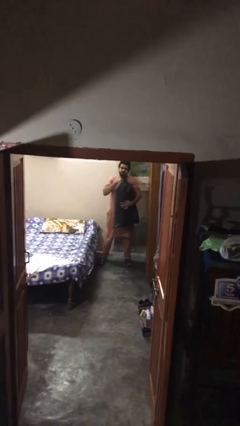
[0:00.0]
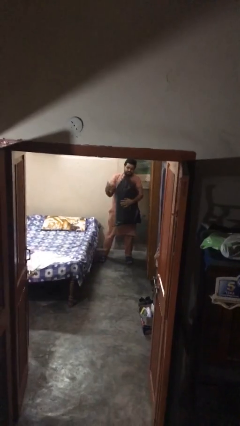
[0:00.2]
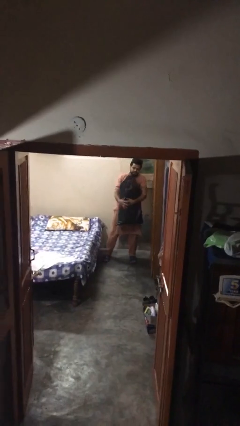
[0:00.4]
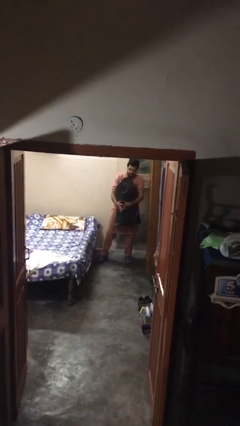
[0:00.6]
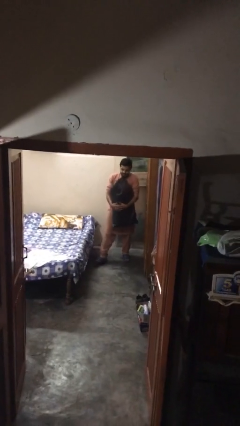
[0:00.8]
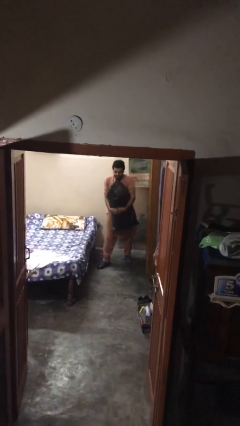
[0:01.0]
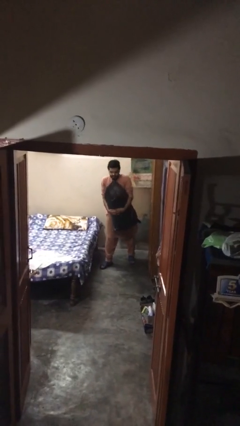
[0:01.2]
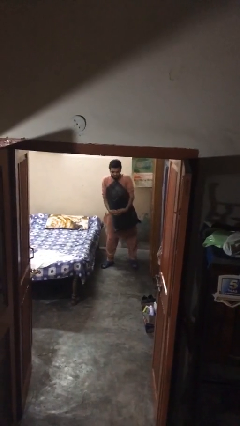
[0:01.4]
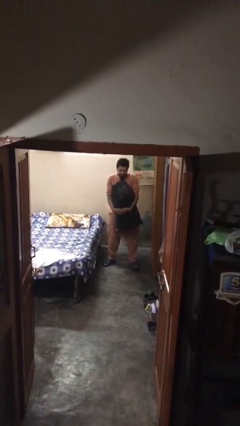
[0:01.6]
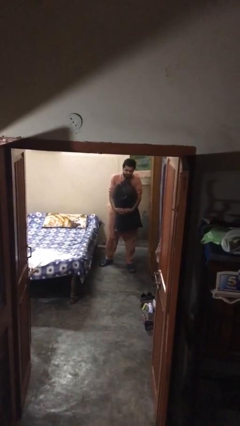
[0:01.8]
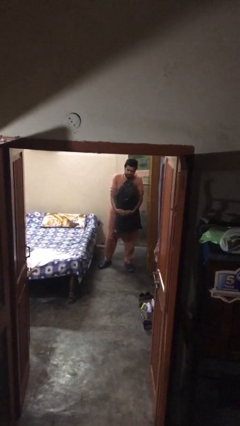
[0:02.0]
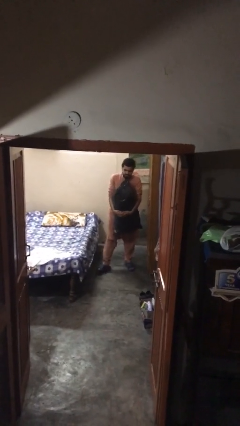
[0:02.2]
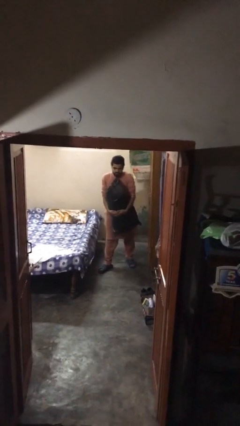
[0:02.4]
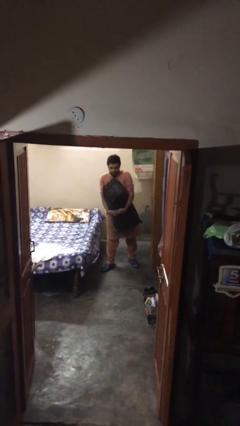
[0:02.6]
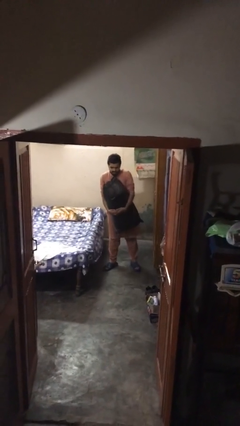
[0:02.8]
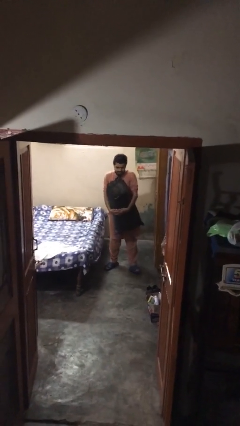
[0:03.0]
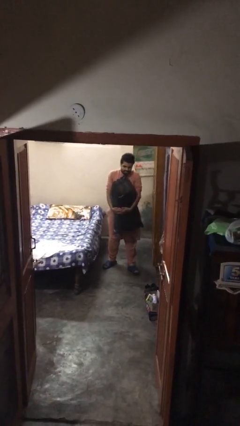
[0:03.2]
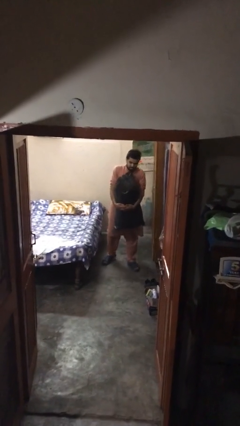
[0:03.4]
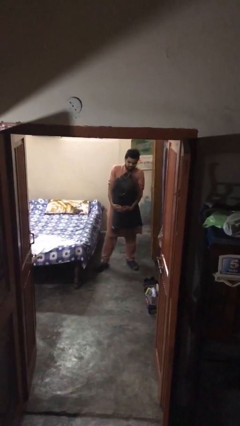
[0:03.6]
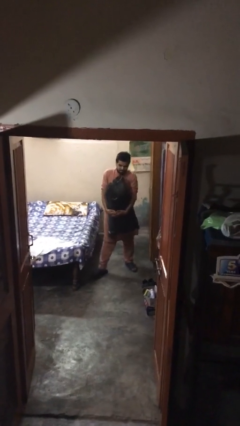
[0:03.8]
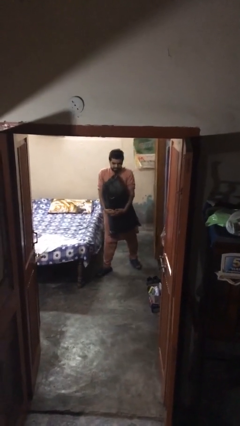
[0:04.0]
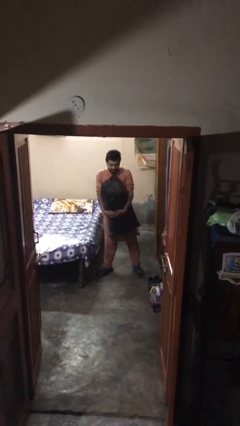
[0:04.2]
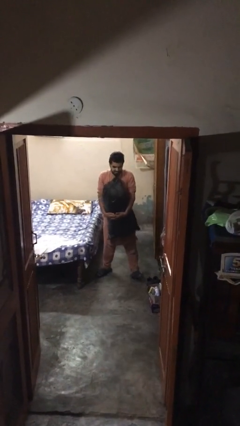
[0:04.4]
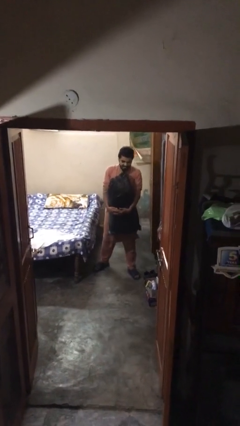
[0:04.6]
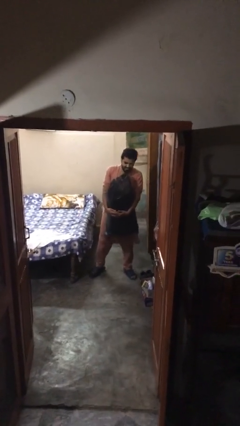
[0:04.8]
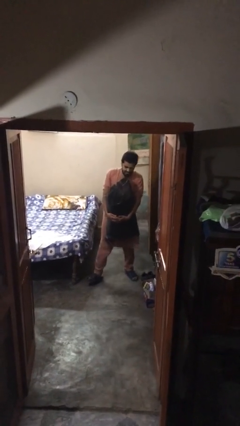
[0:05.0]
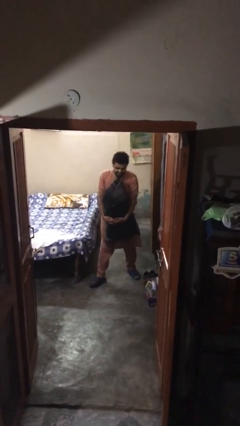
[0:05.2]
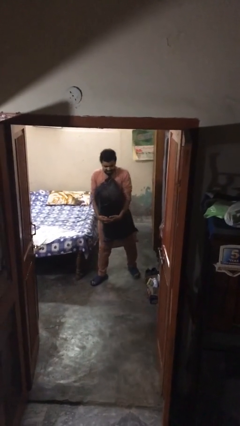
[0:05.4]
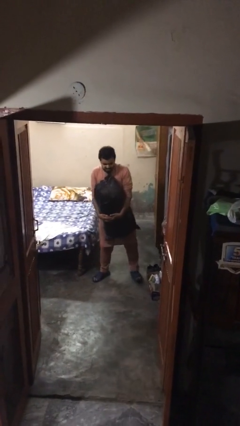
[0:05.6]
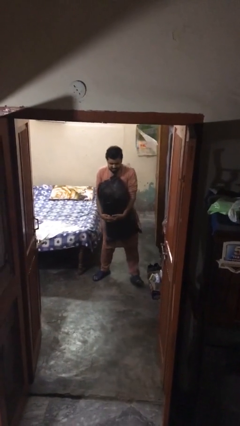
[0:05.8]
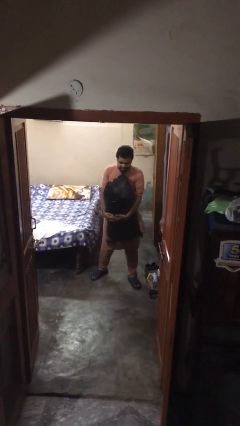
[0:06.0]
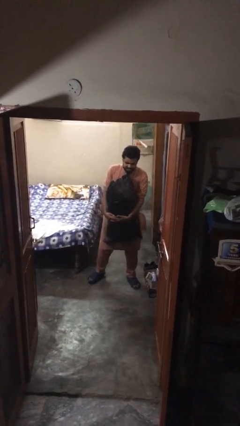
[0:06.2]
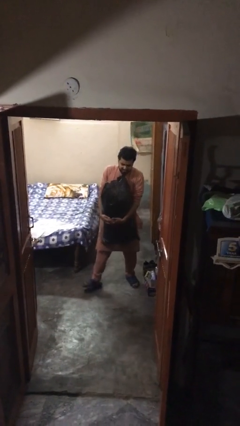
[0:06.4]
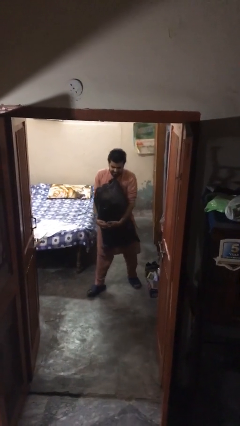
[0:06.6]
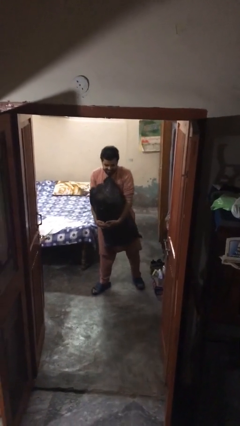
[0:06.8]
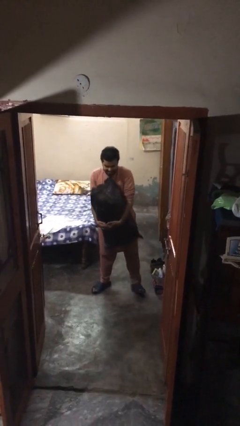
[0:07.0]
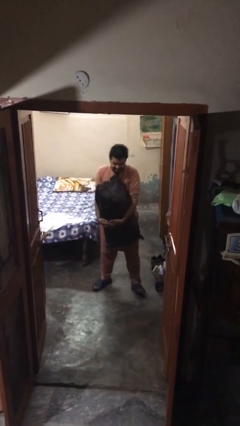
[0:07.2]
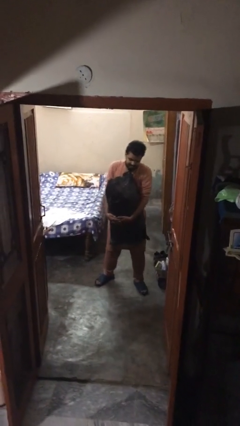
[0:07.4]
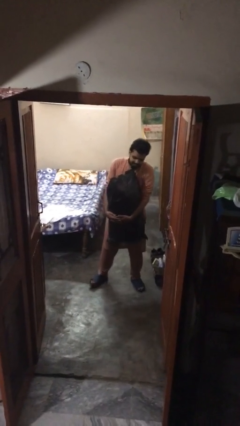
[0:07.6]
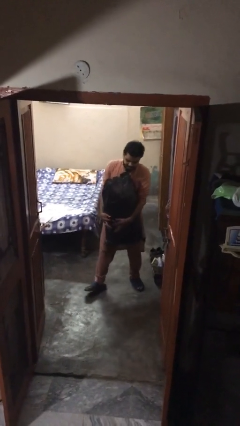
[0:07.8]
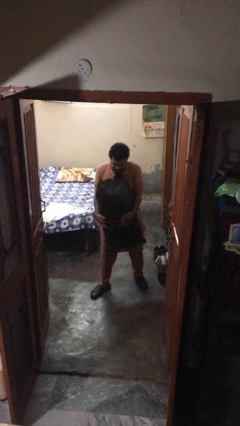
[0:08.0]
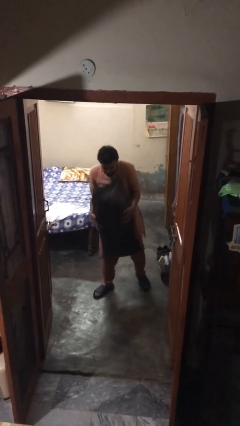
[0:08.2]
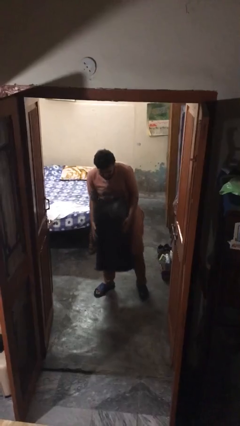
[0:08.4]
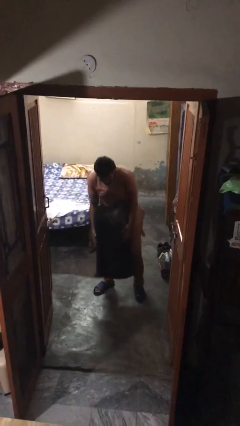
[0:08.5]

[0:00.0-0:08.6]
person carries heavy object

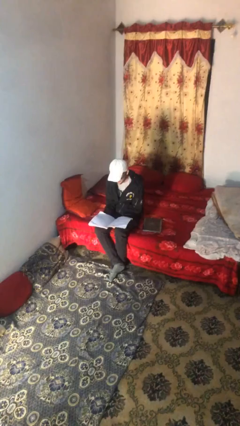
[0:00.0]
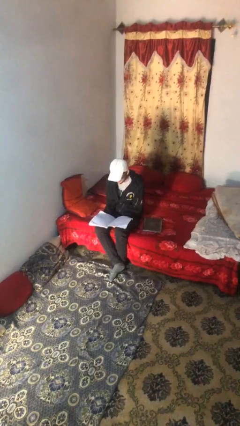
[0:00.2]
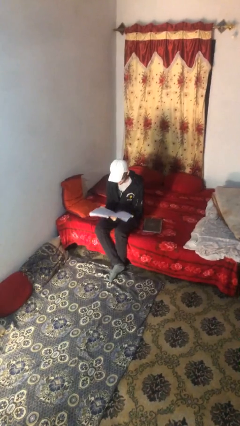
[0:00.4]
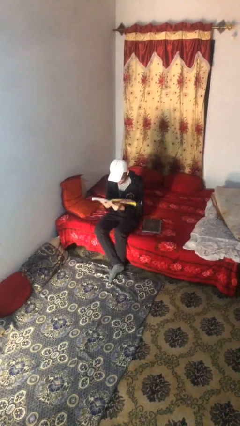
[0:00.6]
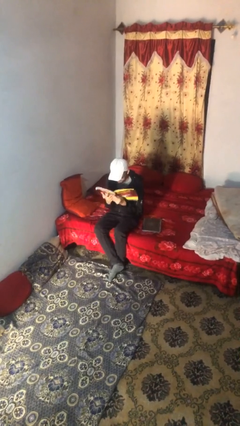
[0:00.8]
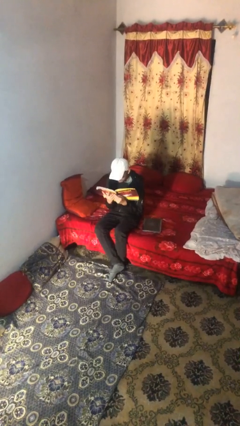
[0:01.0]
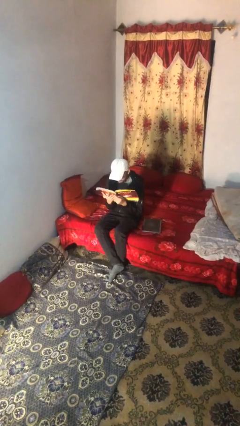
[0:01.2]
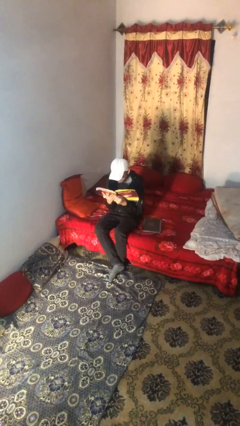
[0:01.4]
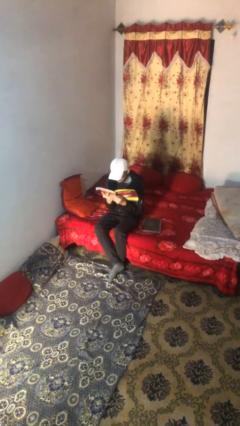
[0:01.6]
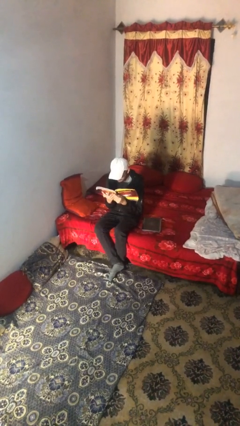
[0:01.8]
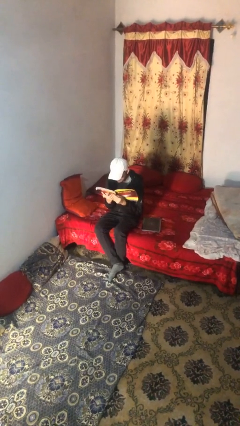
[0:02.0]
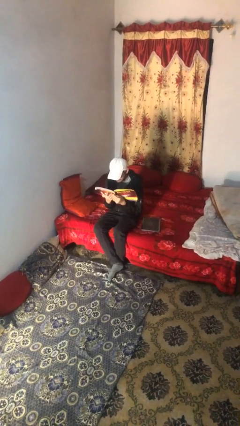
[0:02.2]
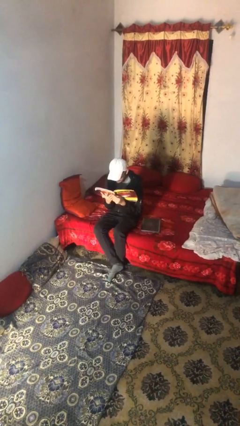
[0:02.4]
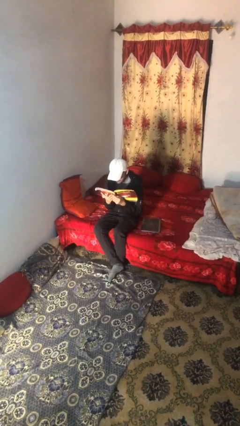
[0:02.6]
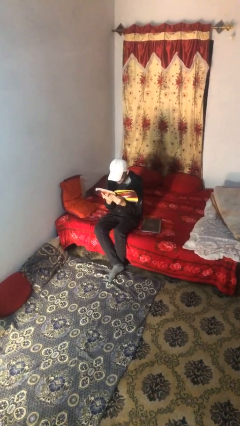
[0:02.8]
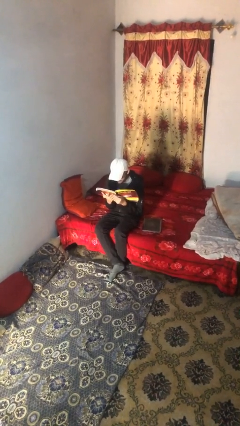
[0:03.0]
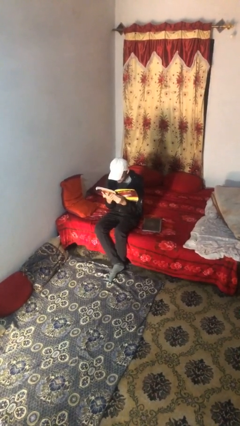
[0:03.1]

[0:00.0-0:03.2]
person reads document

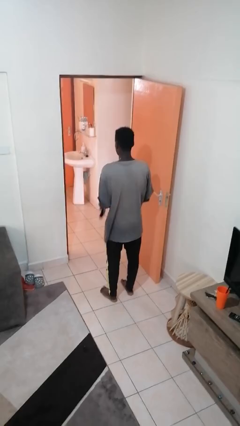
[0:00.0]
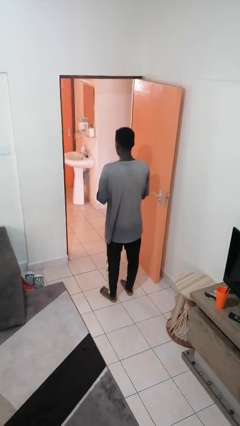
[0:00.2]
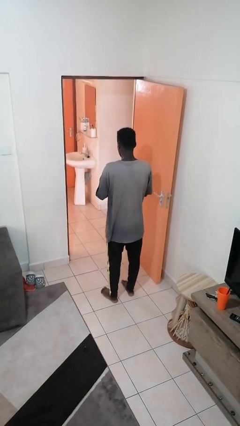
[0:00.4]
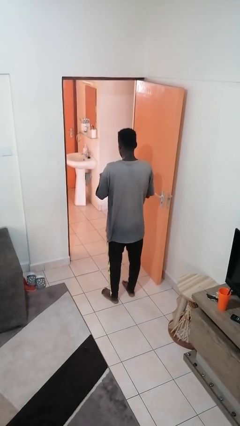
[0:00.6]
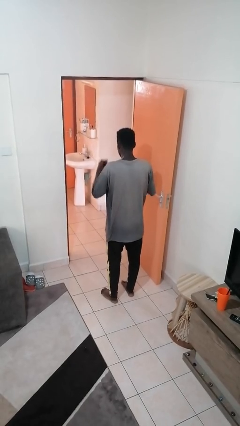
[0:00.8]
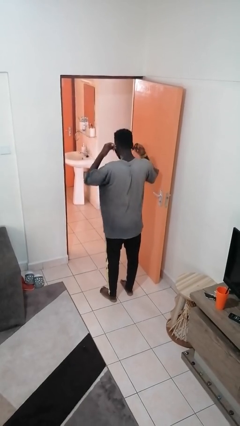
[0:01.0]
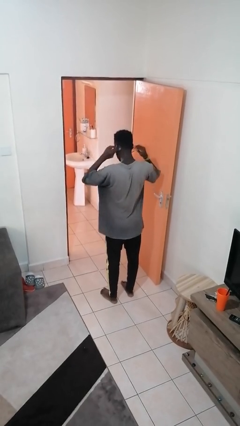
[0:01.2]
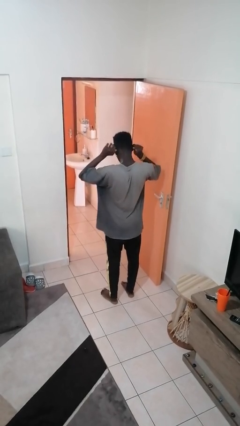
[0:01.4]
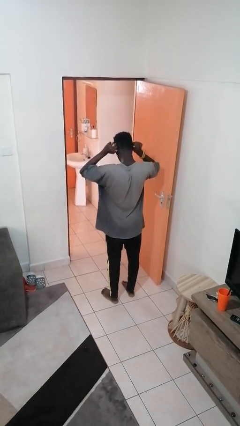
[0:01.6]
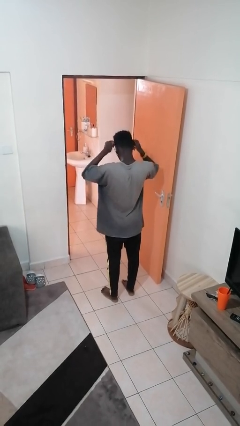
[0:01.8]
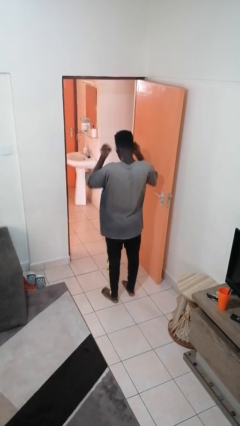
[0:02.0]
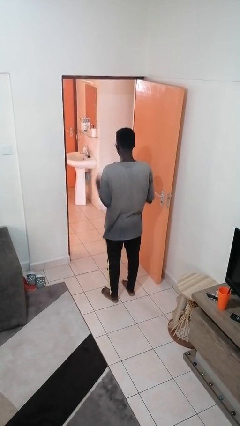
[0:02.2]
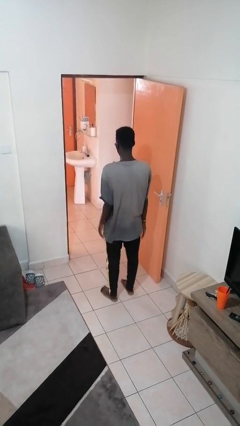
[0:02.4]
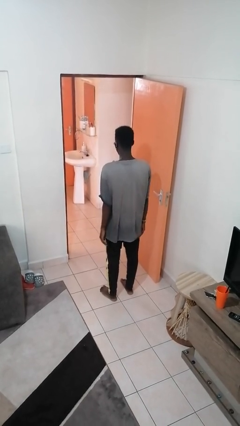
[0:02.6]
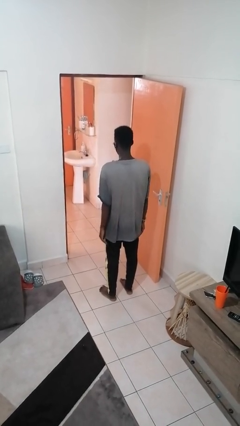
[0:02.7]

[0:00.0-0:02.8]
person puts on facemask

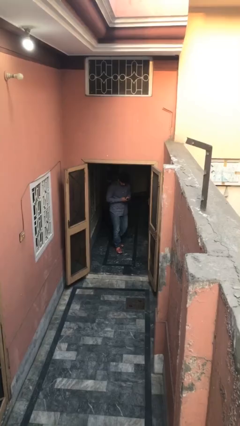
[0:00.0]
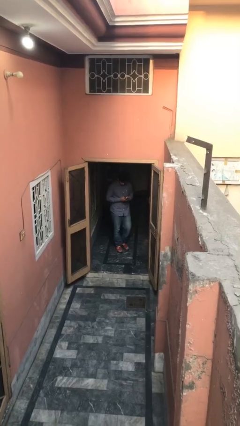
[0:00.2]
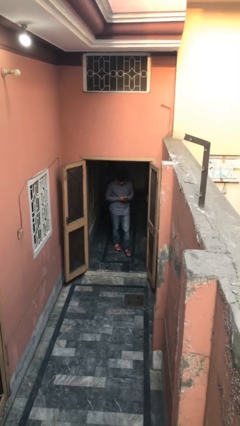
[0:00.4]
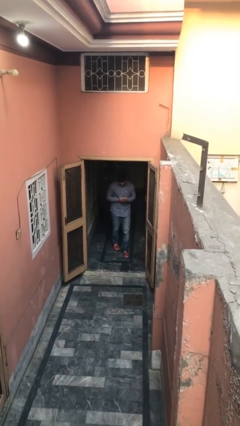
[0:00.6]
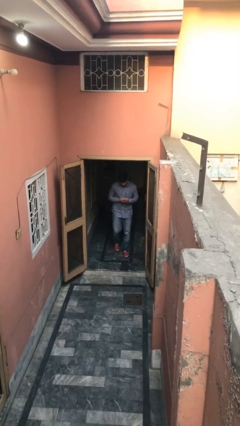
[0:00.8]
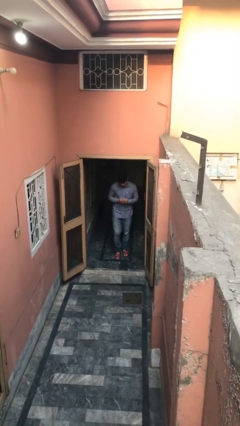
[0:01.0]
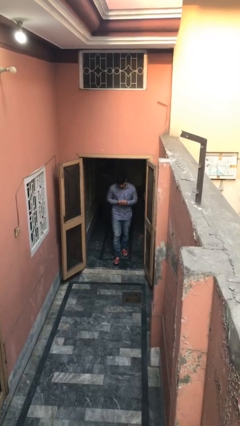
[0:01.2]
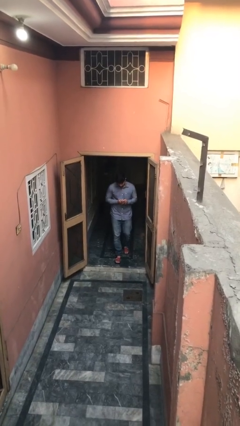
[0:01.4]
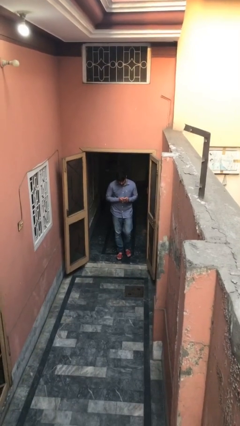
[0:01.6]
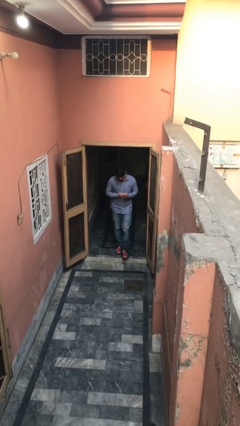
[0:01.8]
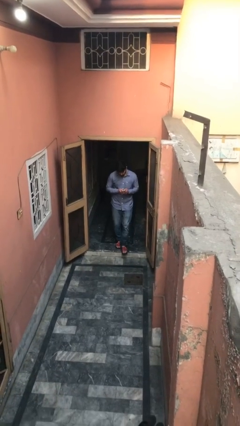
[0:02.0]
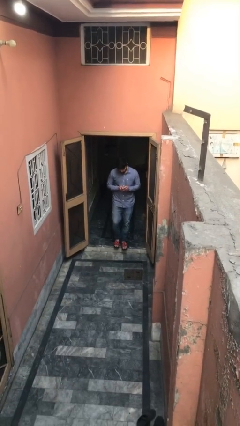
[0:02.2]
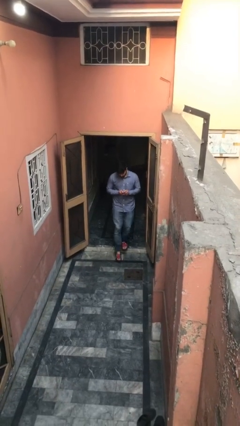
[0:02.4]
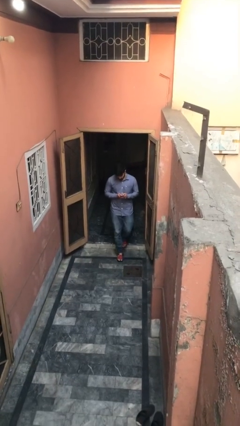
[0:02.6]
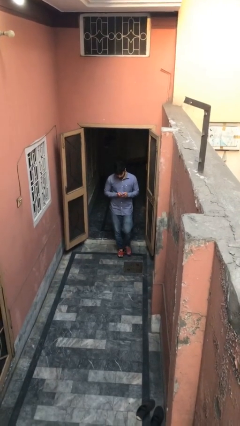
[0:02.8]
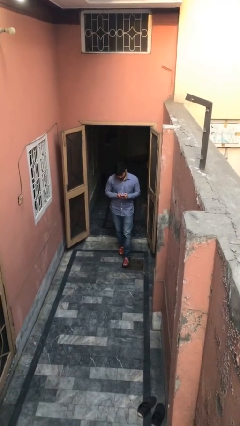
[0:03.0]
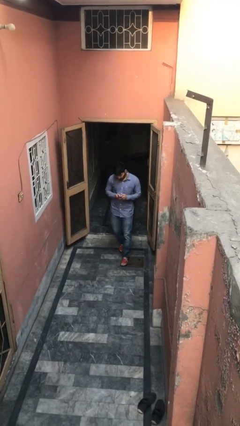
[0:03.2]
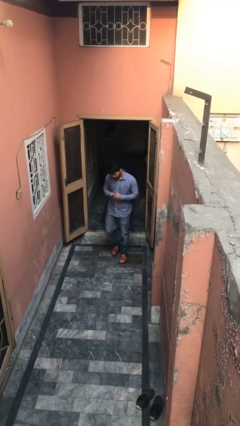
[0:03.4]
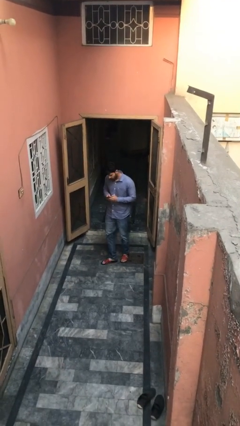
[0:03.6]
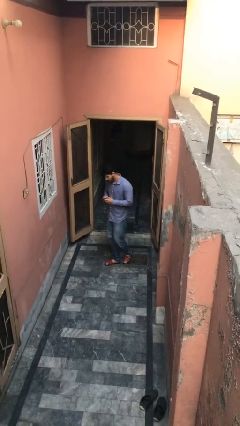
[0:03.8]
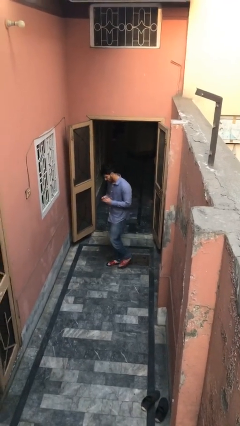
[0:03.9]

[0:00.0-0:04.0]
person enters scene through structure
